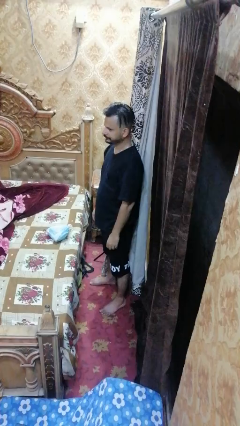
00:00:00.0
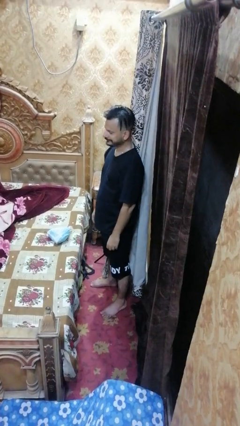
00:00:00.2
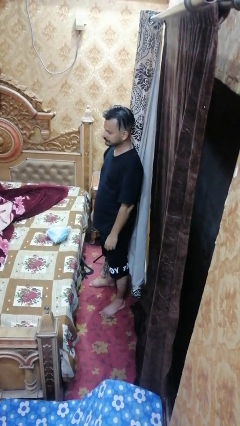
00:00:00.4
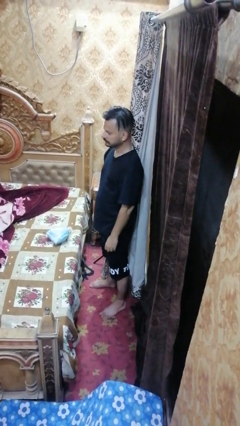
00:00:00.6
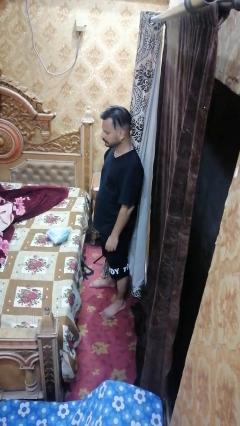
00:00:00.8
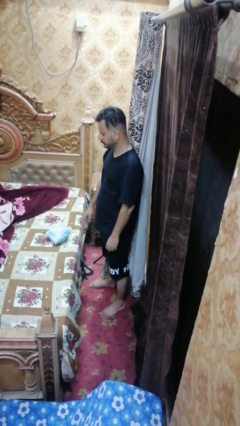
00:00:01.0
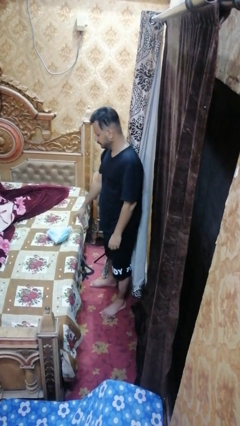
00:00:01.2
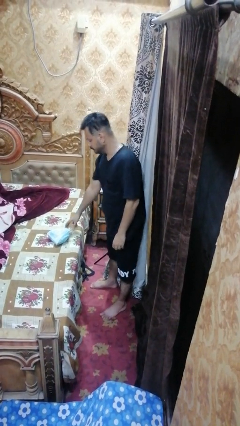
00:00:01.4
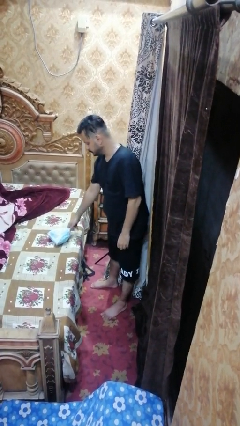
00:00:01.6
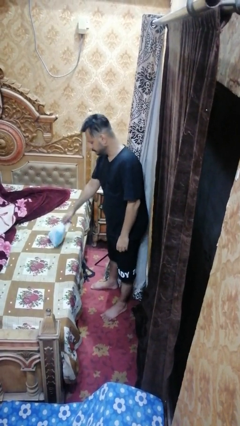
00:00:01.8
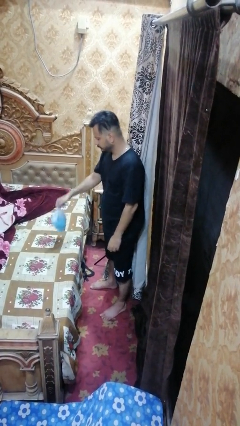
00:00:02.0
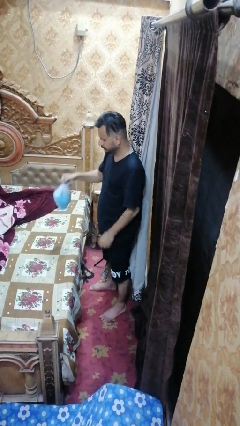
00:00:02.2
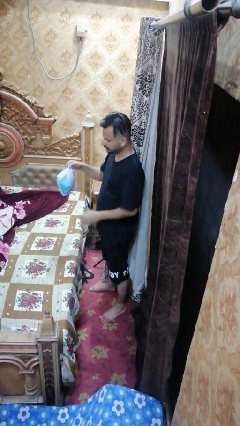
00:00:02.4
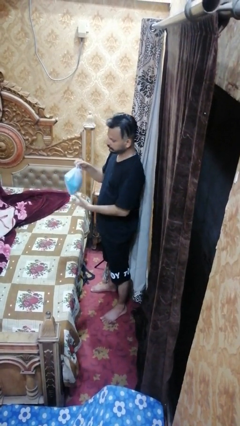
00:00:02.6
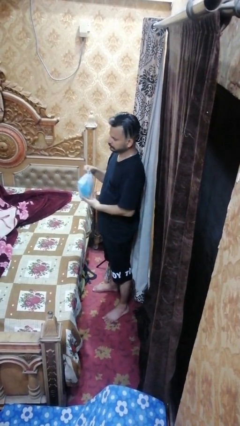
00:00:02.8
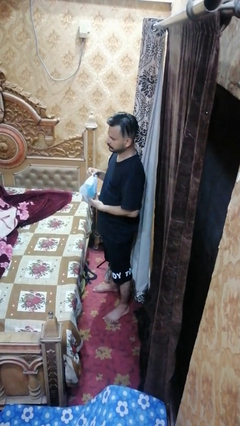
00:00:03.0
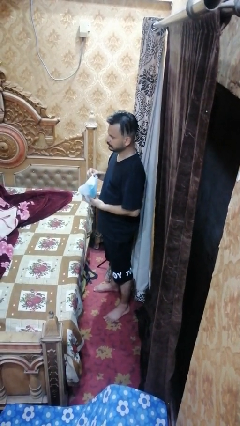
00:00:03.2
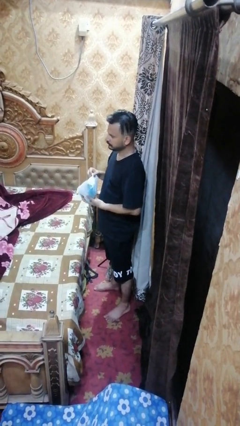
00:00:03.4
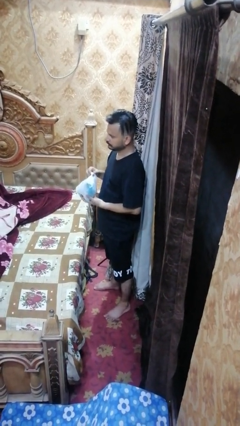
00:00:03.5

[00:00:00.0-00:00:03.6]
person picks up object from bed

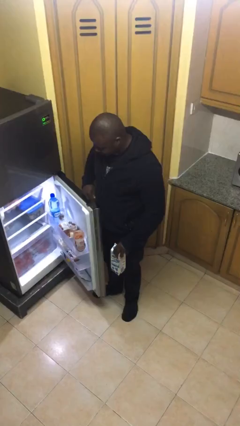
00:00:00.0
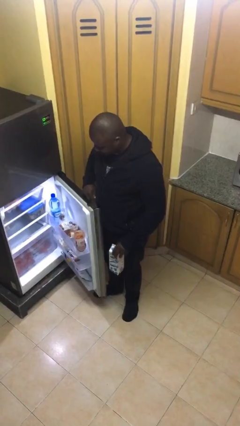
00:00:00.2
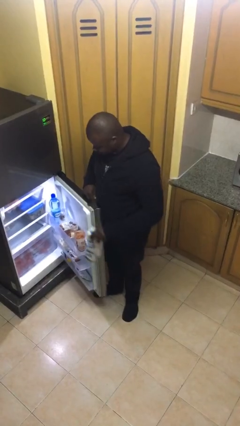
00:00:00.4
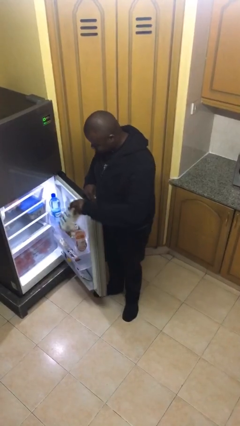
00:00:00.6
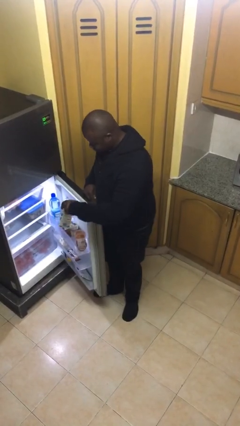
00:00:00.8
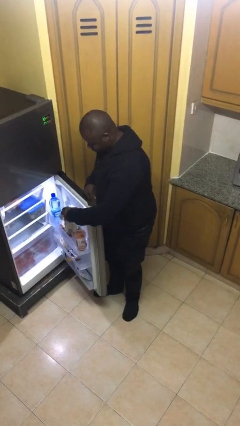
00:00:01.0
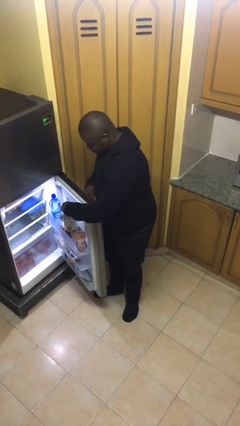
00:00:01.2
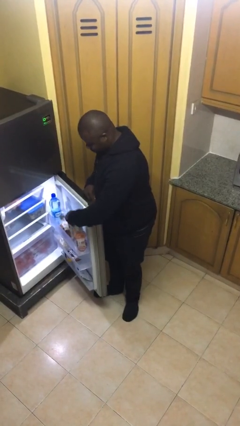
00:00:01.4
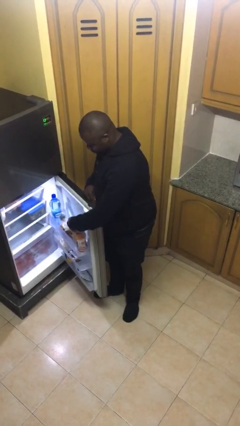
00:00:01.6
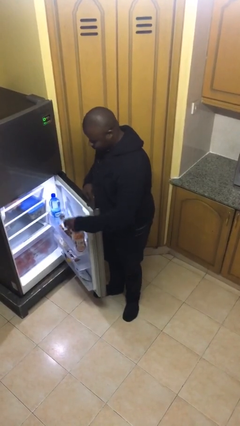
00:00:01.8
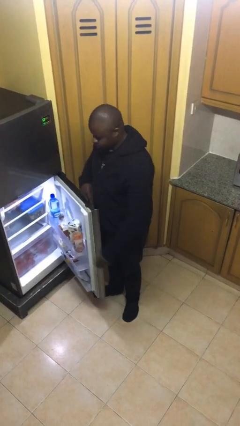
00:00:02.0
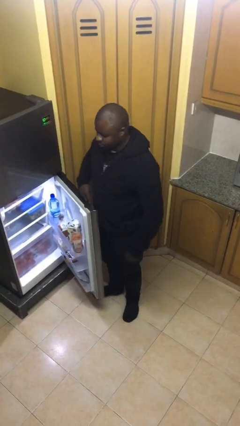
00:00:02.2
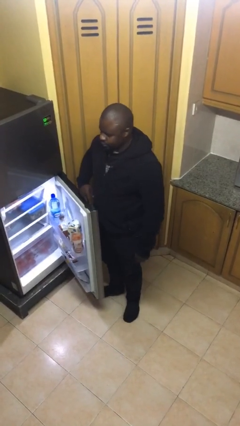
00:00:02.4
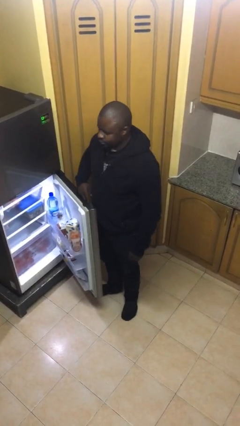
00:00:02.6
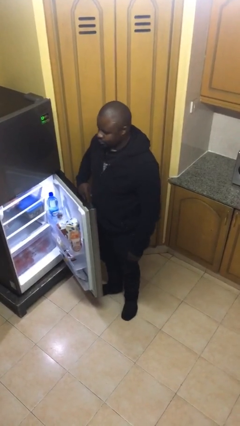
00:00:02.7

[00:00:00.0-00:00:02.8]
person puts object into refrigerator

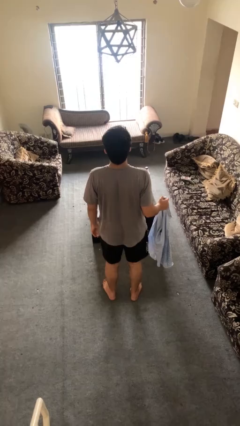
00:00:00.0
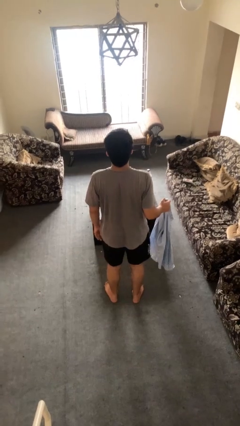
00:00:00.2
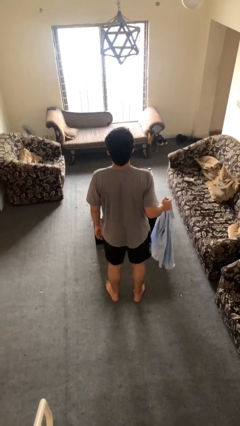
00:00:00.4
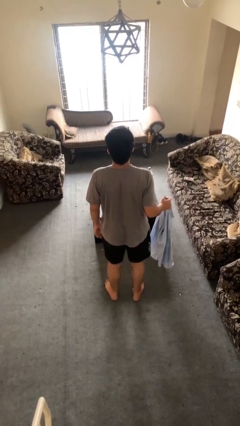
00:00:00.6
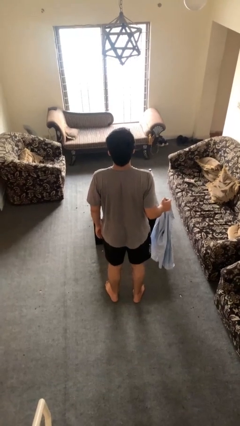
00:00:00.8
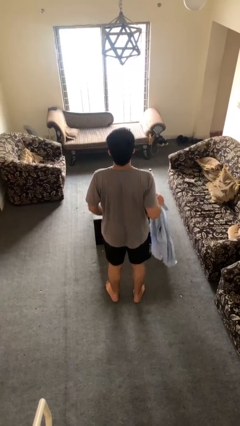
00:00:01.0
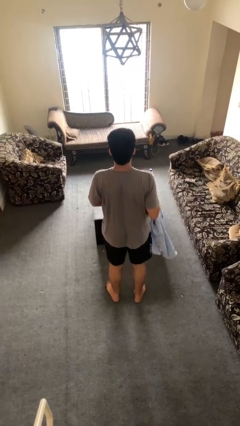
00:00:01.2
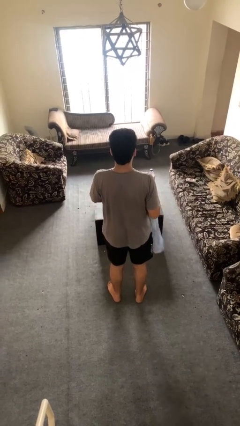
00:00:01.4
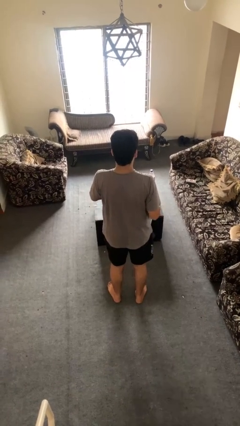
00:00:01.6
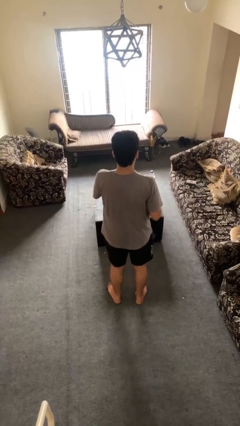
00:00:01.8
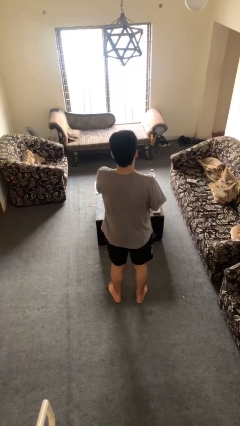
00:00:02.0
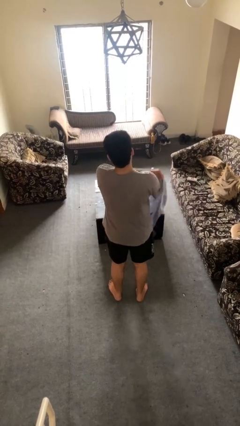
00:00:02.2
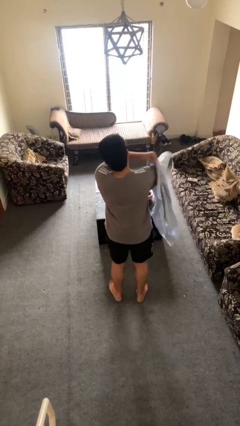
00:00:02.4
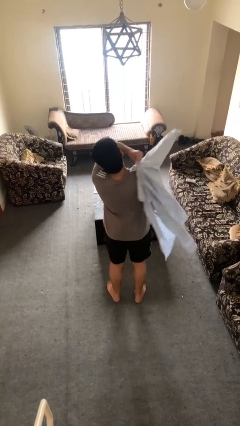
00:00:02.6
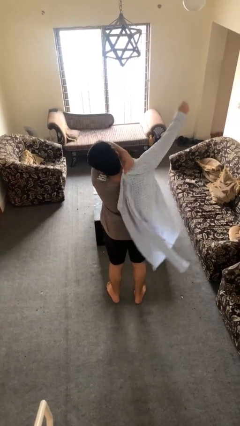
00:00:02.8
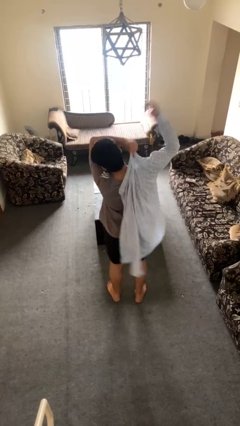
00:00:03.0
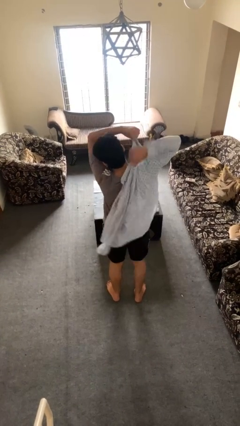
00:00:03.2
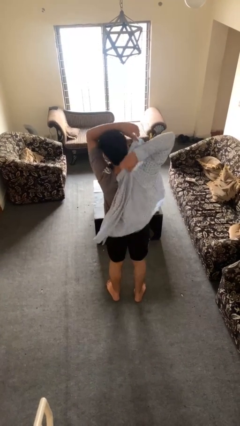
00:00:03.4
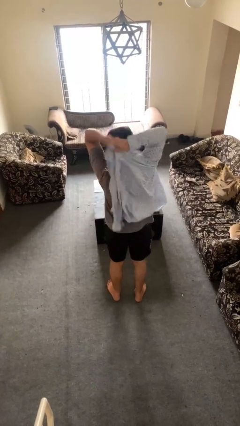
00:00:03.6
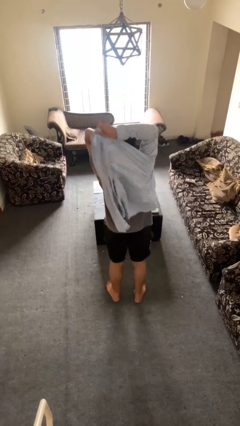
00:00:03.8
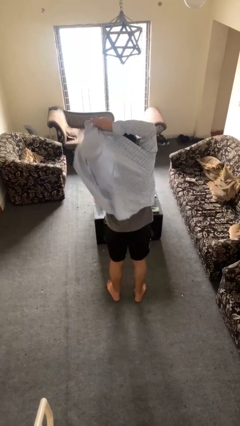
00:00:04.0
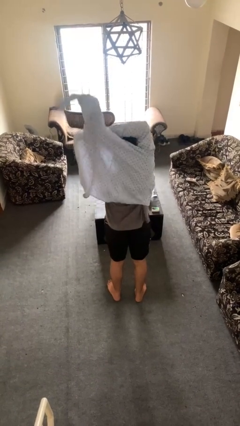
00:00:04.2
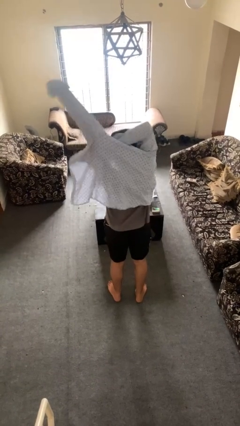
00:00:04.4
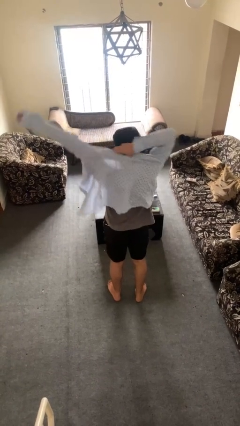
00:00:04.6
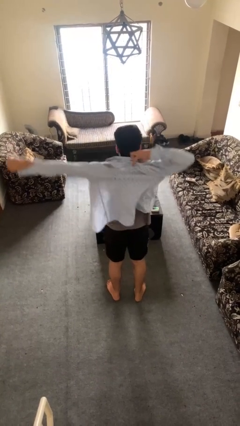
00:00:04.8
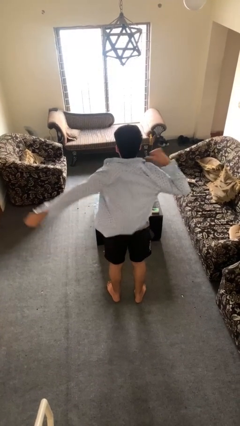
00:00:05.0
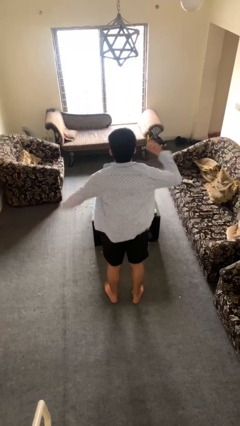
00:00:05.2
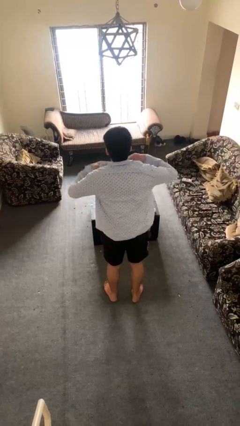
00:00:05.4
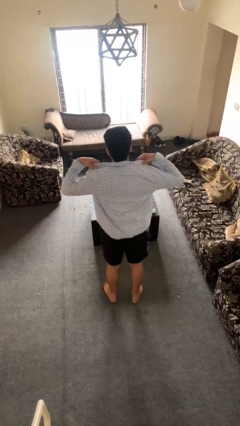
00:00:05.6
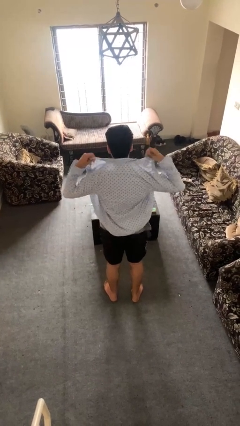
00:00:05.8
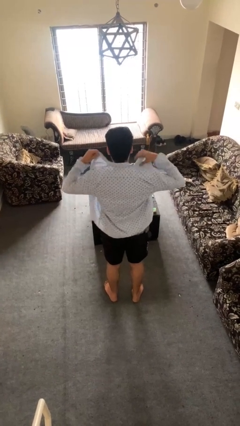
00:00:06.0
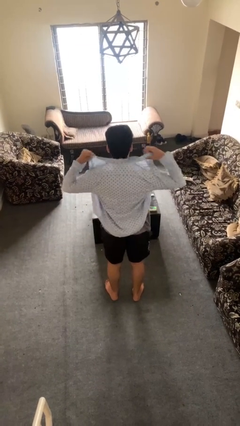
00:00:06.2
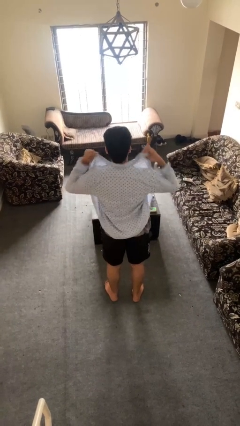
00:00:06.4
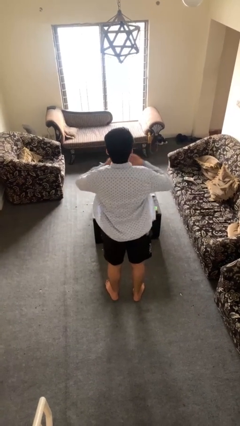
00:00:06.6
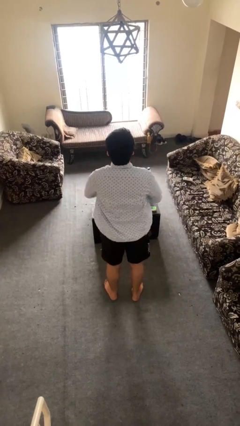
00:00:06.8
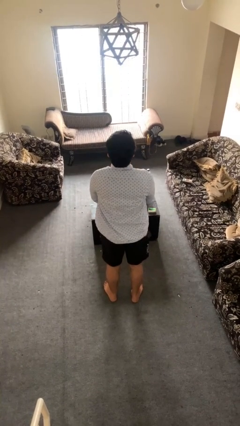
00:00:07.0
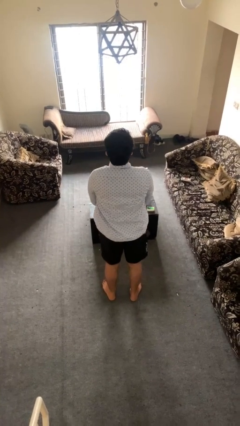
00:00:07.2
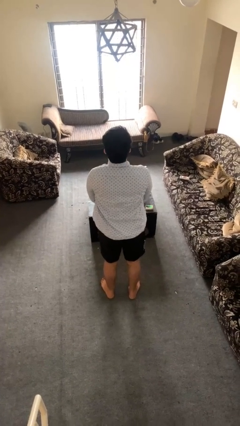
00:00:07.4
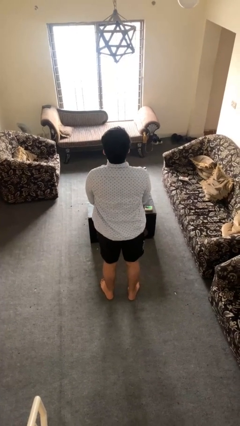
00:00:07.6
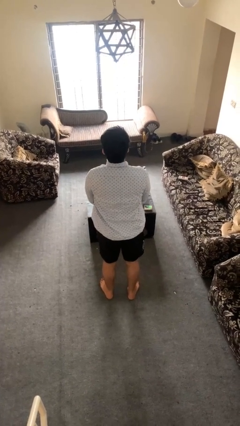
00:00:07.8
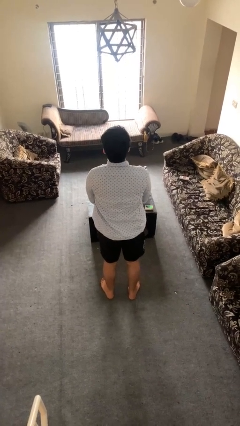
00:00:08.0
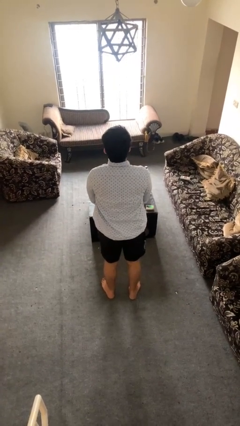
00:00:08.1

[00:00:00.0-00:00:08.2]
person puts on shirt

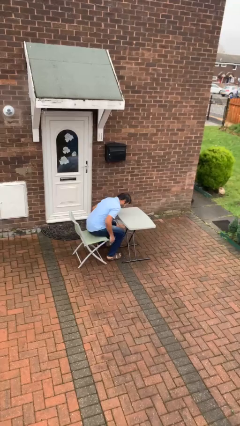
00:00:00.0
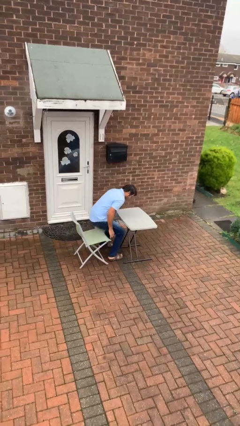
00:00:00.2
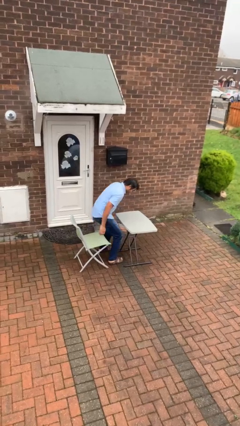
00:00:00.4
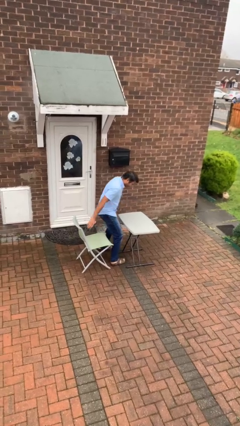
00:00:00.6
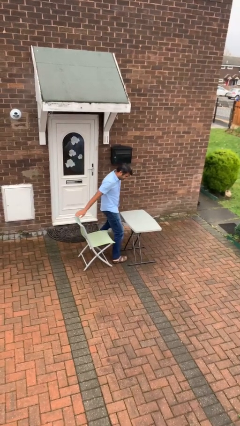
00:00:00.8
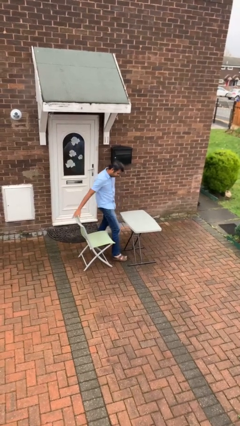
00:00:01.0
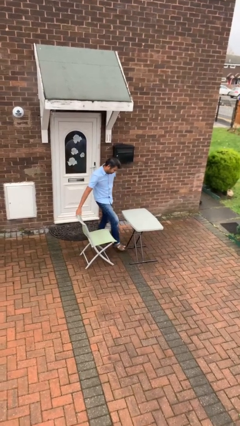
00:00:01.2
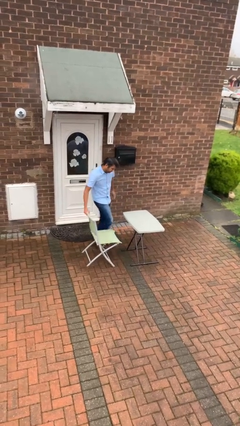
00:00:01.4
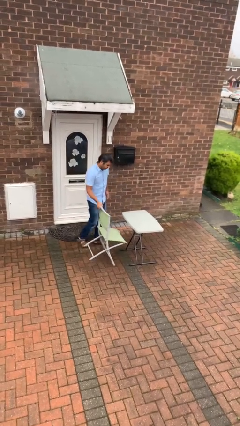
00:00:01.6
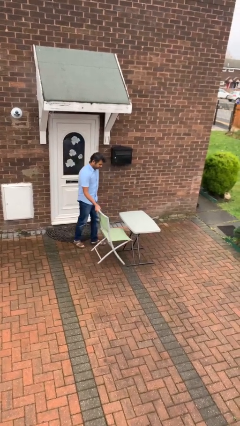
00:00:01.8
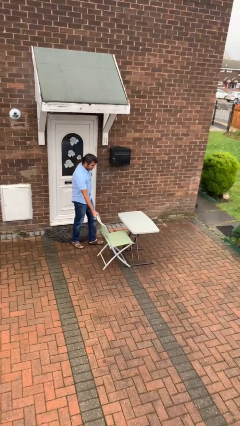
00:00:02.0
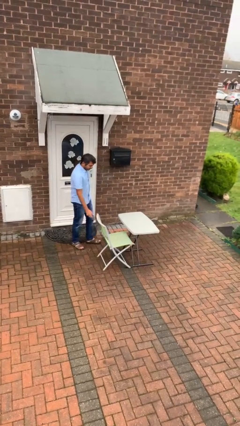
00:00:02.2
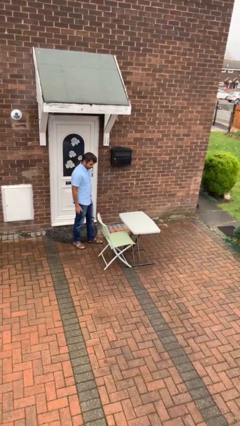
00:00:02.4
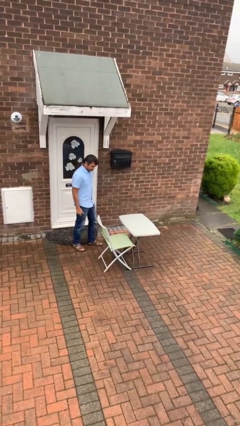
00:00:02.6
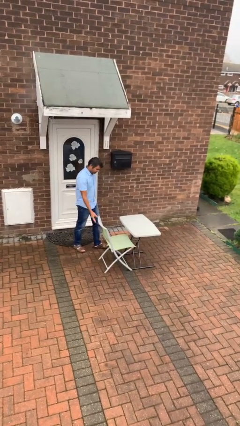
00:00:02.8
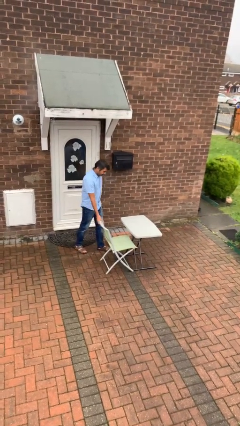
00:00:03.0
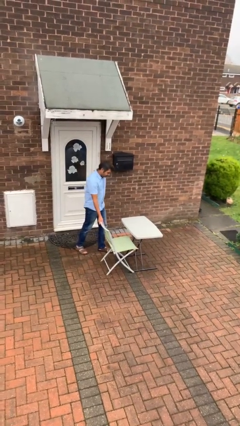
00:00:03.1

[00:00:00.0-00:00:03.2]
person stands up

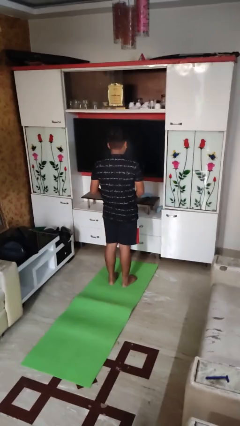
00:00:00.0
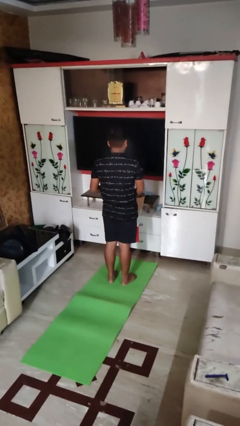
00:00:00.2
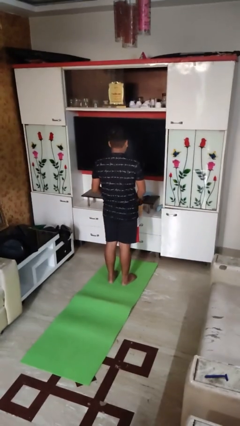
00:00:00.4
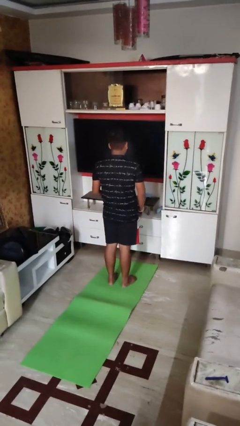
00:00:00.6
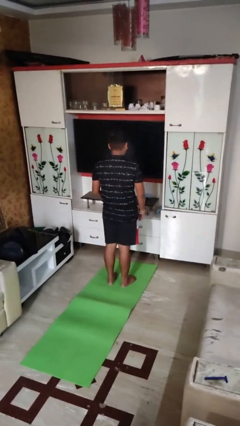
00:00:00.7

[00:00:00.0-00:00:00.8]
person puts object into bag
